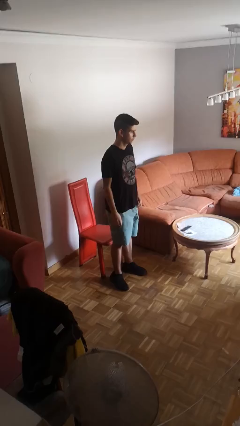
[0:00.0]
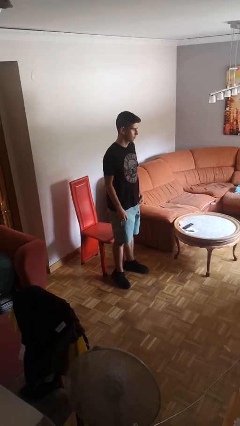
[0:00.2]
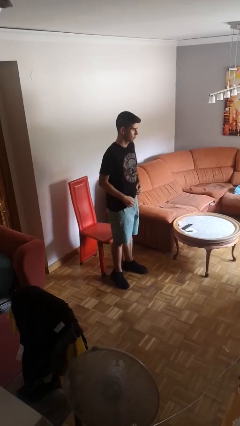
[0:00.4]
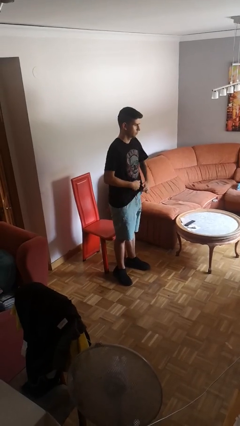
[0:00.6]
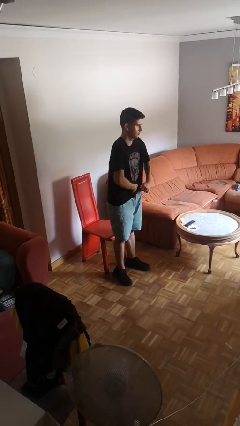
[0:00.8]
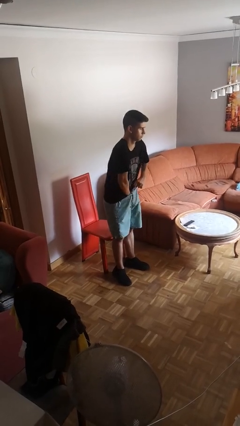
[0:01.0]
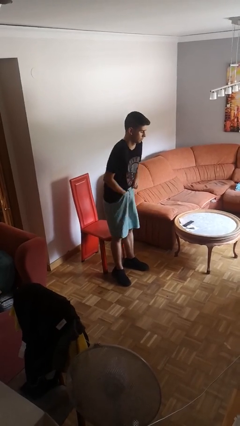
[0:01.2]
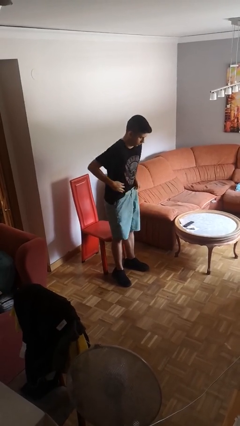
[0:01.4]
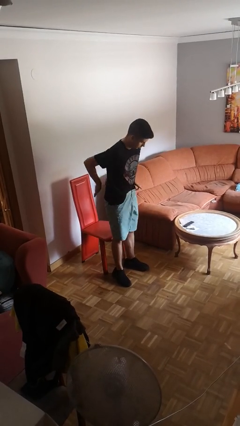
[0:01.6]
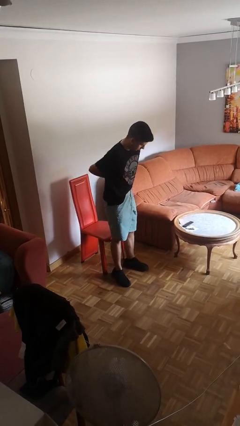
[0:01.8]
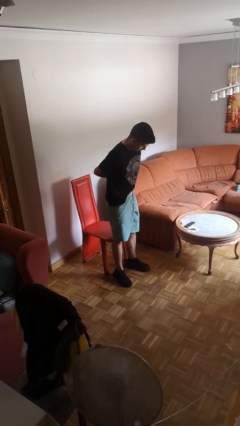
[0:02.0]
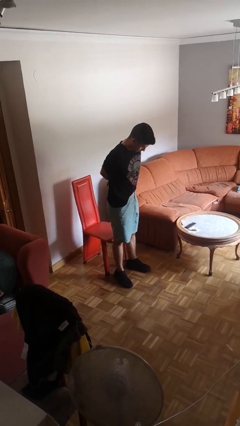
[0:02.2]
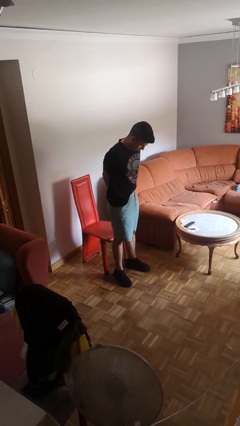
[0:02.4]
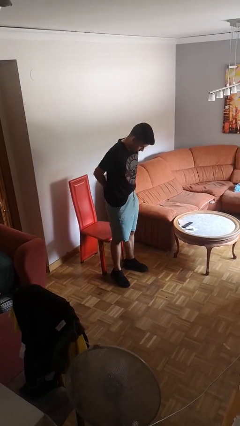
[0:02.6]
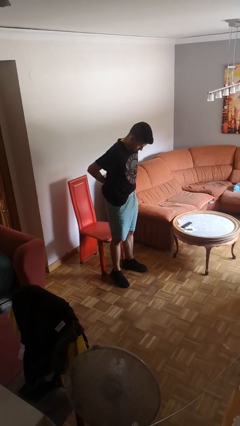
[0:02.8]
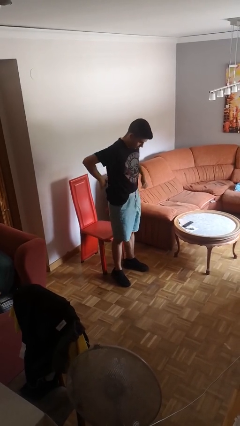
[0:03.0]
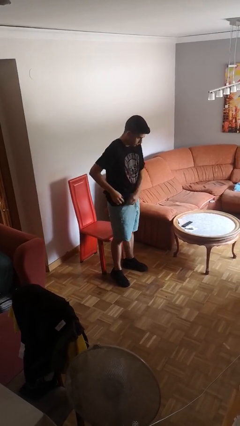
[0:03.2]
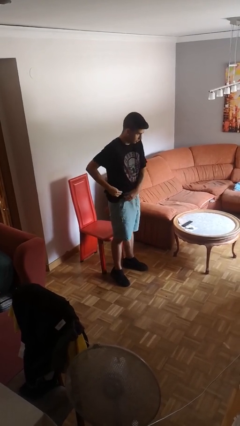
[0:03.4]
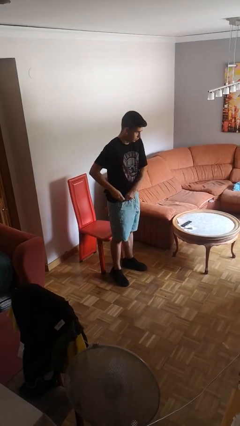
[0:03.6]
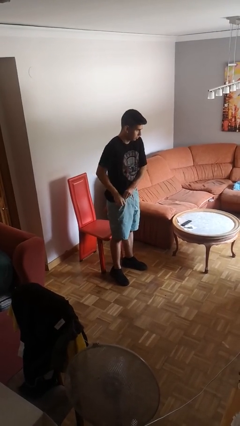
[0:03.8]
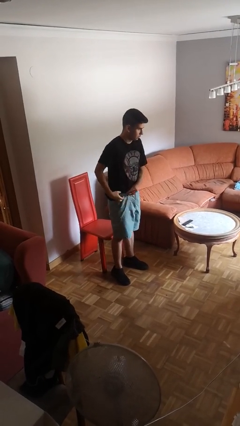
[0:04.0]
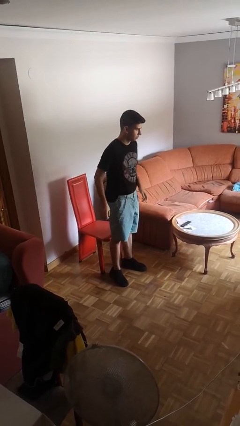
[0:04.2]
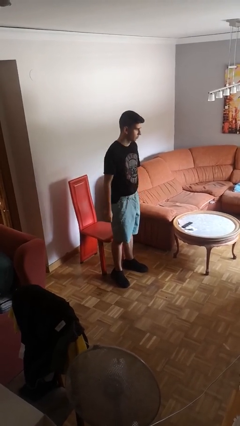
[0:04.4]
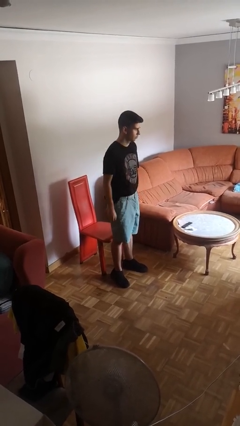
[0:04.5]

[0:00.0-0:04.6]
person tucks in shirt

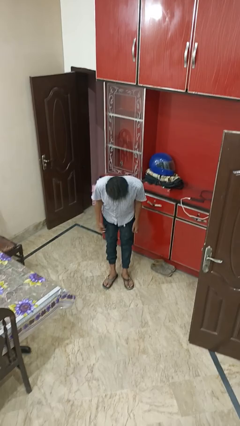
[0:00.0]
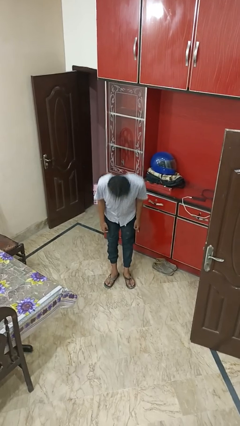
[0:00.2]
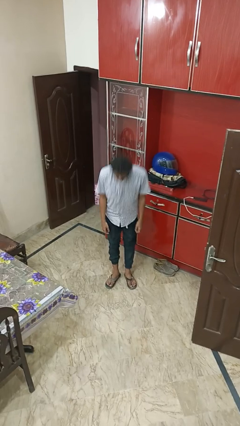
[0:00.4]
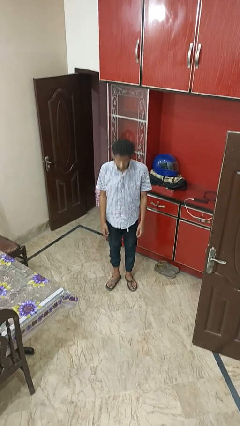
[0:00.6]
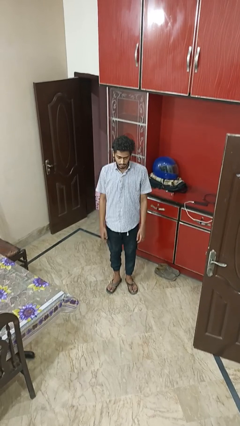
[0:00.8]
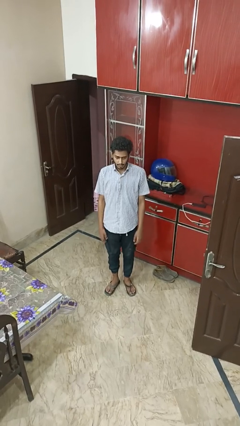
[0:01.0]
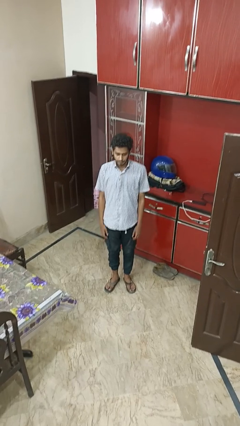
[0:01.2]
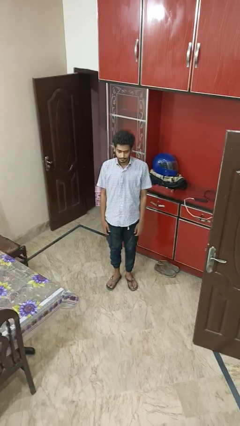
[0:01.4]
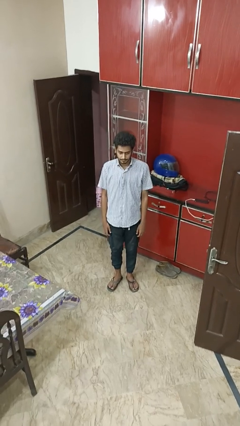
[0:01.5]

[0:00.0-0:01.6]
person bows

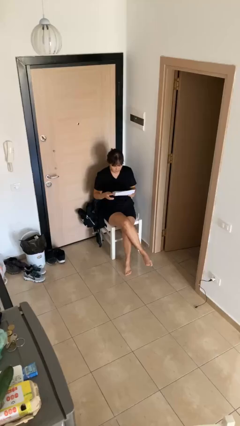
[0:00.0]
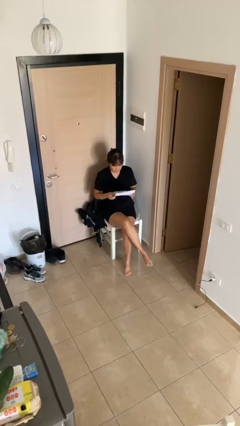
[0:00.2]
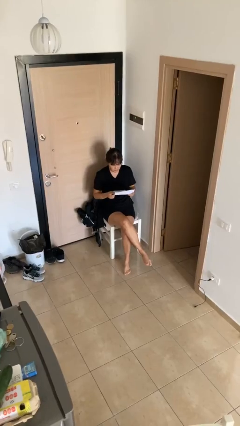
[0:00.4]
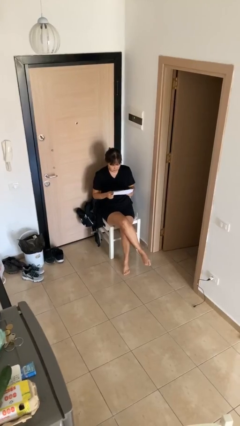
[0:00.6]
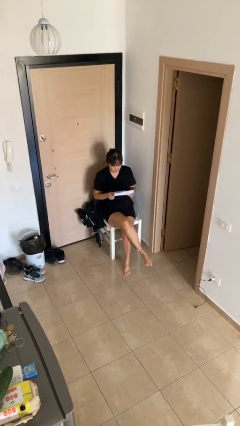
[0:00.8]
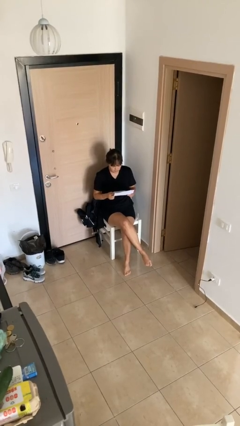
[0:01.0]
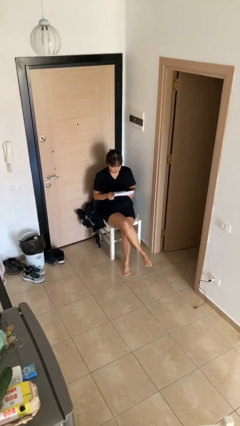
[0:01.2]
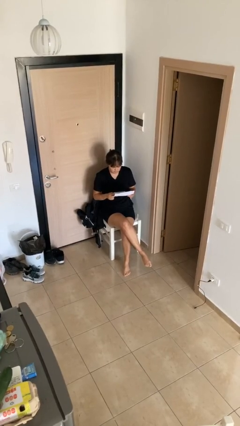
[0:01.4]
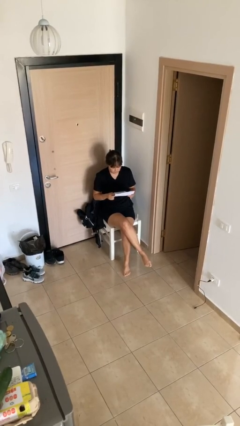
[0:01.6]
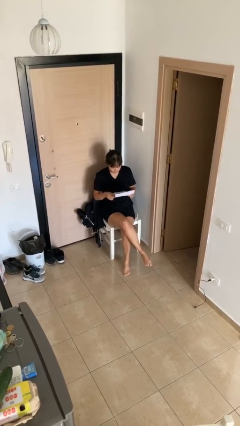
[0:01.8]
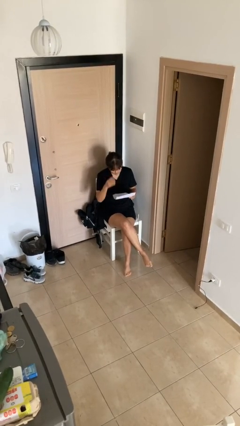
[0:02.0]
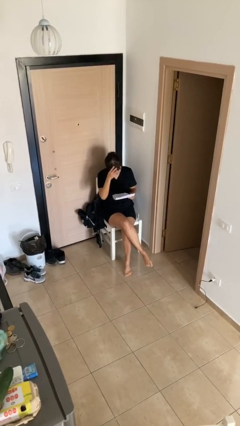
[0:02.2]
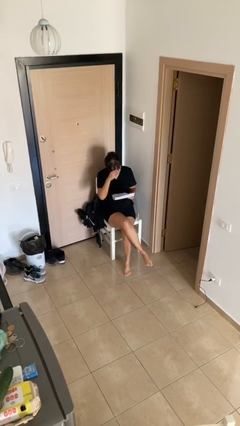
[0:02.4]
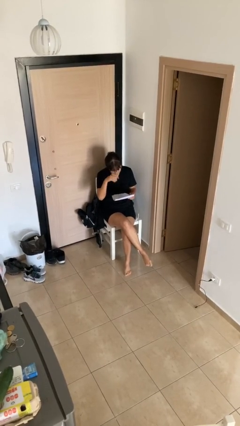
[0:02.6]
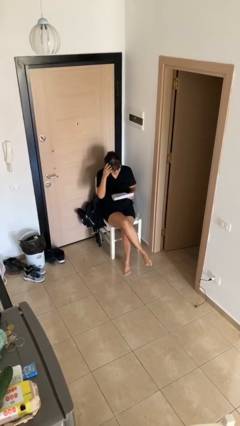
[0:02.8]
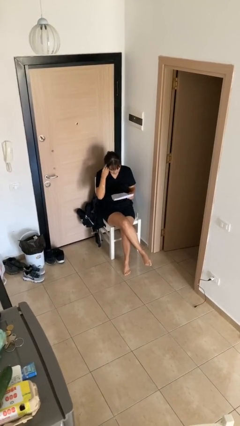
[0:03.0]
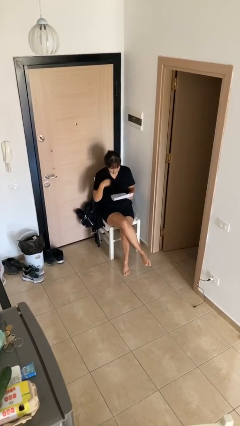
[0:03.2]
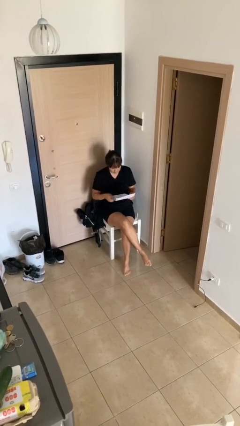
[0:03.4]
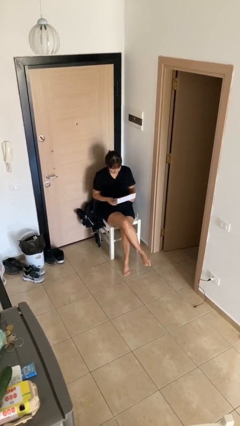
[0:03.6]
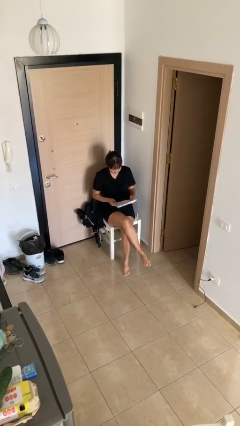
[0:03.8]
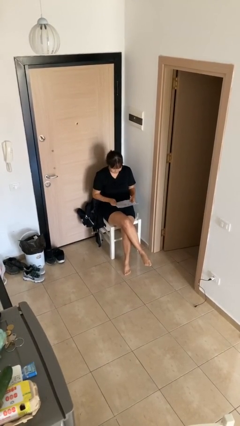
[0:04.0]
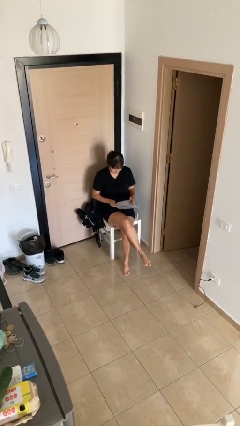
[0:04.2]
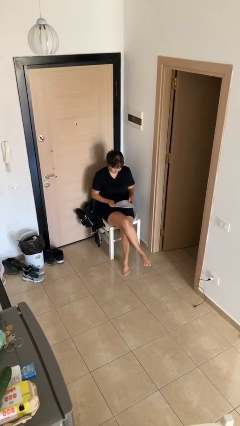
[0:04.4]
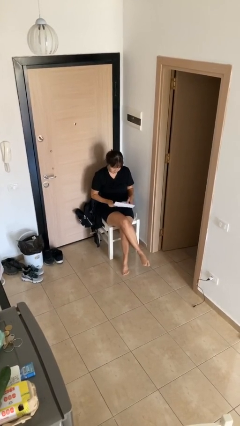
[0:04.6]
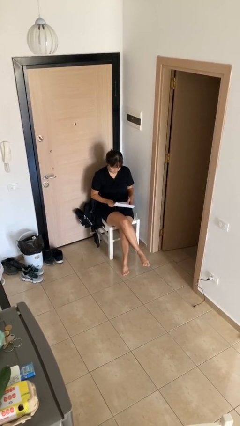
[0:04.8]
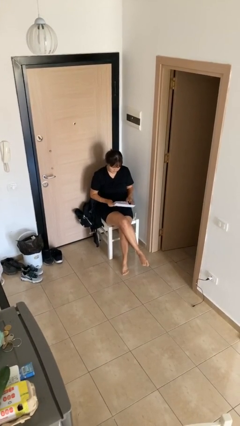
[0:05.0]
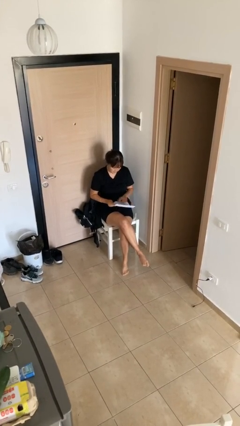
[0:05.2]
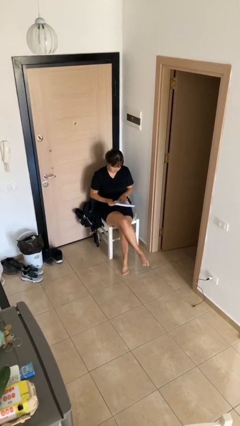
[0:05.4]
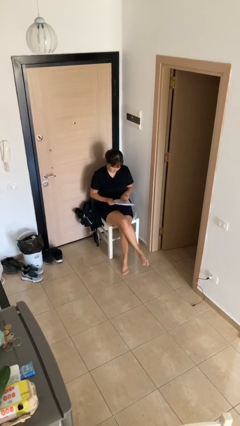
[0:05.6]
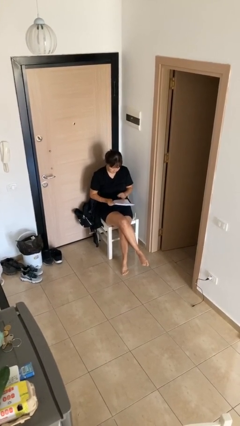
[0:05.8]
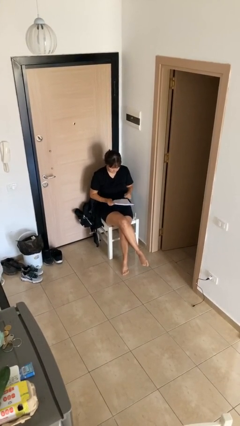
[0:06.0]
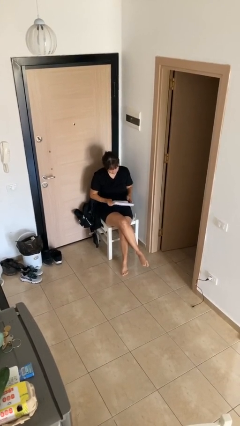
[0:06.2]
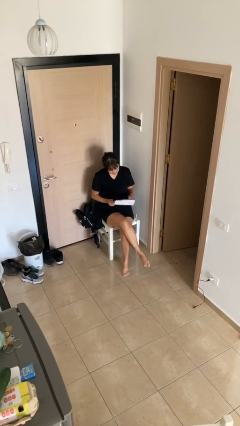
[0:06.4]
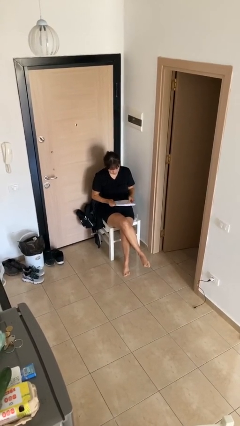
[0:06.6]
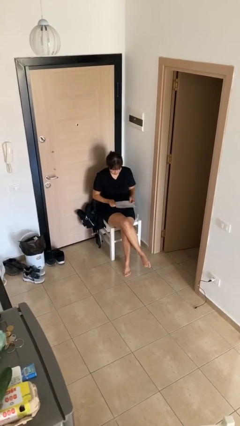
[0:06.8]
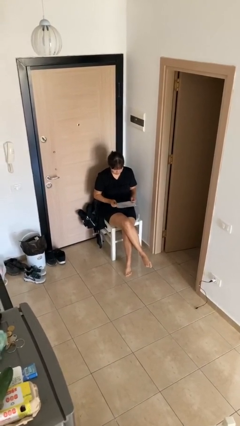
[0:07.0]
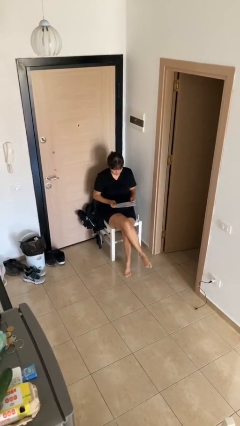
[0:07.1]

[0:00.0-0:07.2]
person reads document

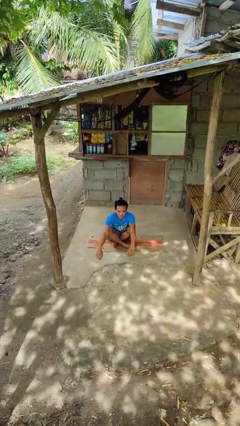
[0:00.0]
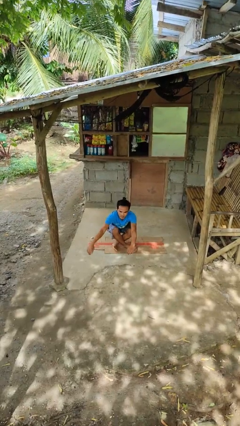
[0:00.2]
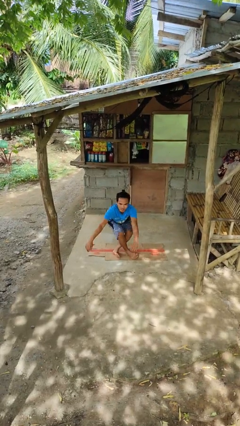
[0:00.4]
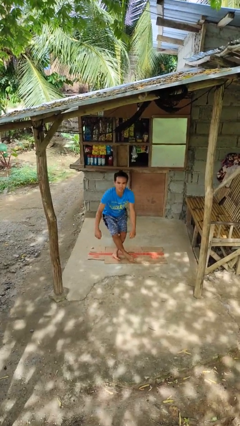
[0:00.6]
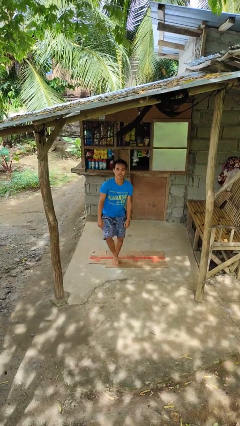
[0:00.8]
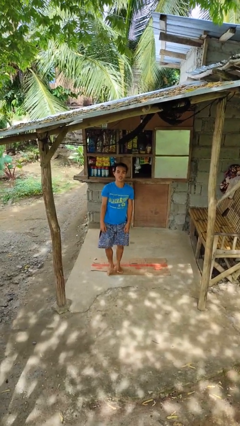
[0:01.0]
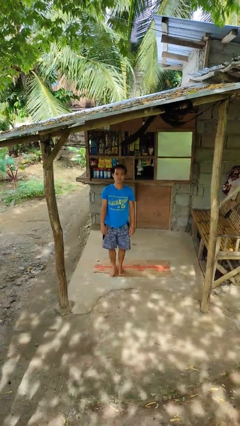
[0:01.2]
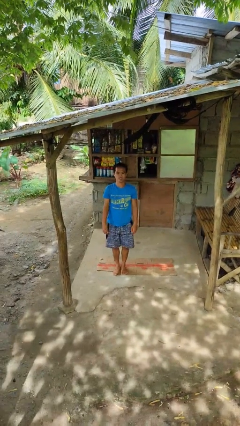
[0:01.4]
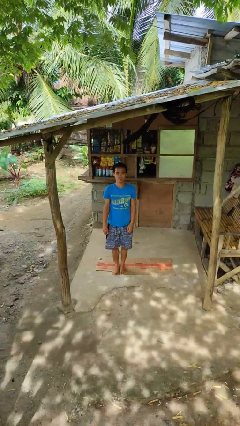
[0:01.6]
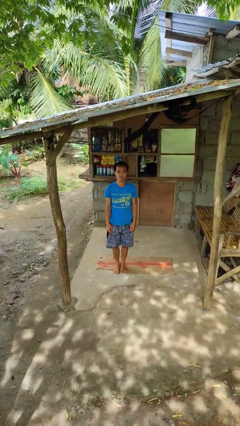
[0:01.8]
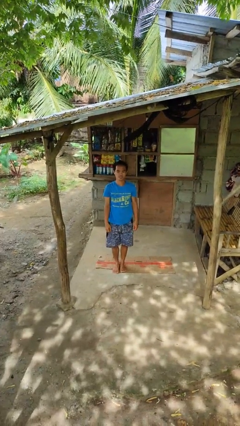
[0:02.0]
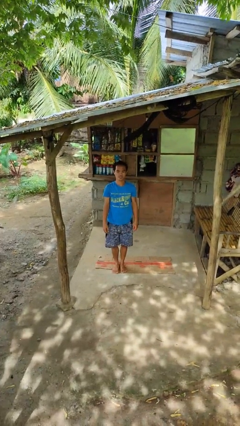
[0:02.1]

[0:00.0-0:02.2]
person stands up from floor

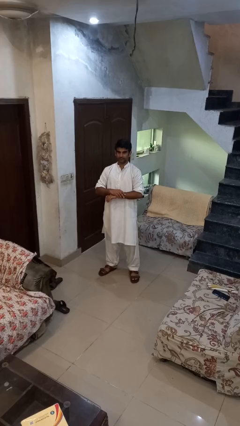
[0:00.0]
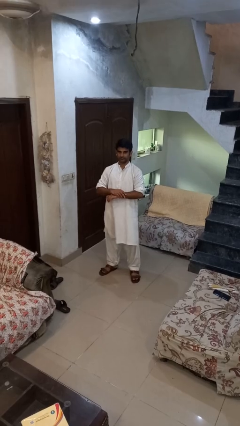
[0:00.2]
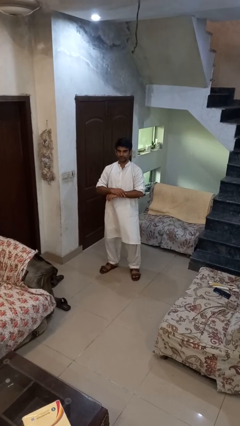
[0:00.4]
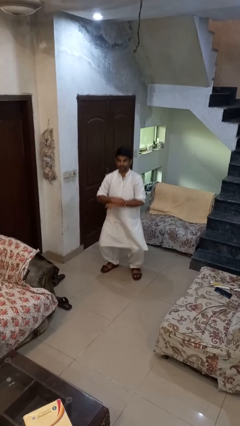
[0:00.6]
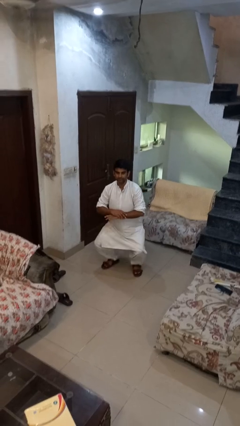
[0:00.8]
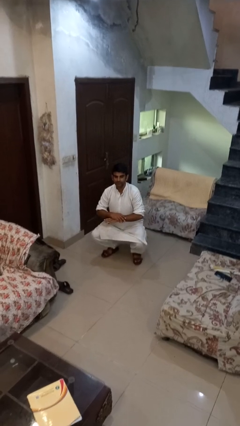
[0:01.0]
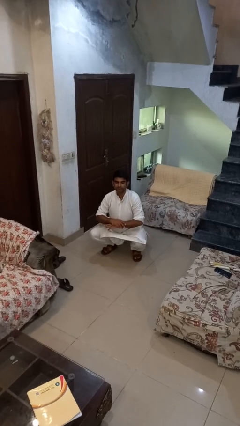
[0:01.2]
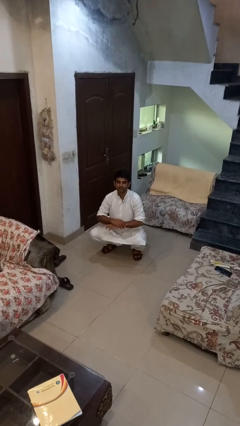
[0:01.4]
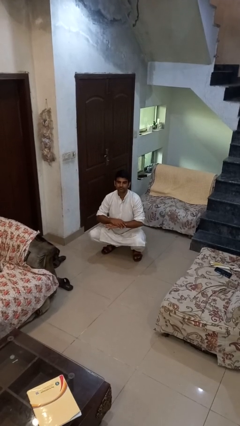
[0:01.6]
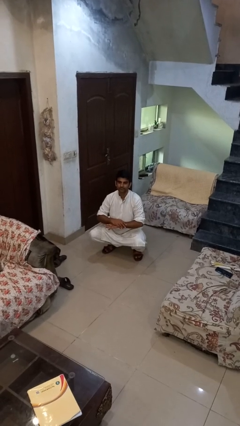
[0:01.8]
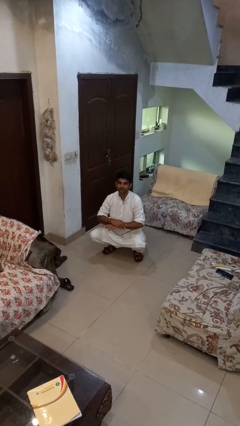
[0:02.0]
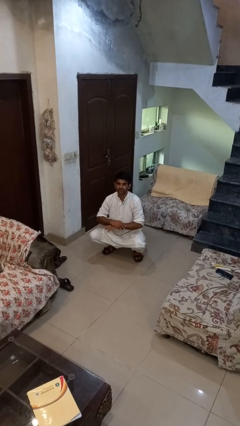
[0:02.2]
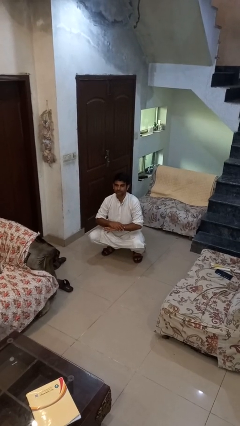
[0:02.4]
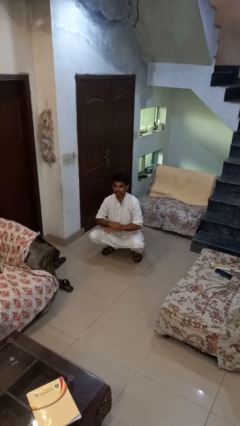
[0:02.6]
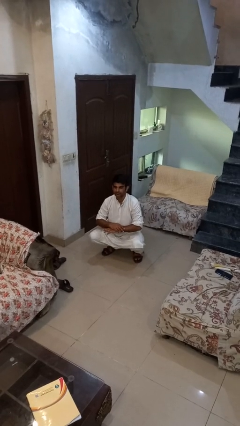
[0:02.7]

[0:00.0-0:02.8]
person squats
